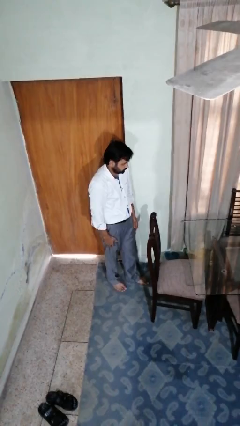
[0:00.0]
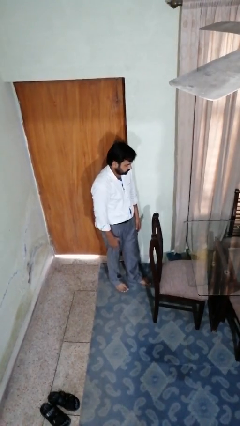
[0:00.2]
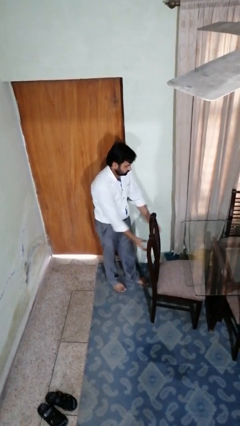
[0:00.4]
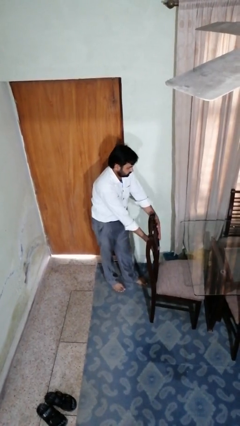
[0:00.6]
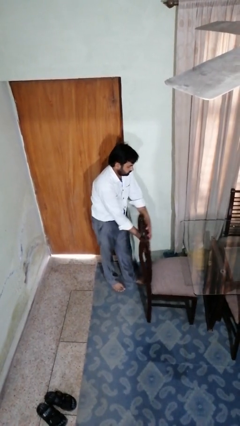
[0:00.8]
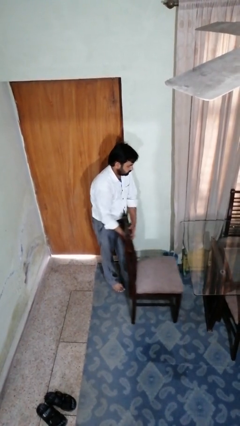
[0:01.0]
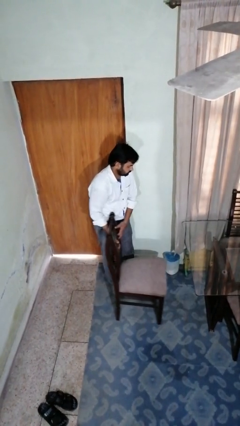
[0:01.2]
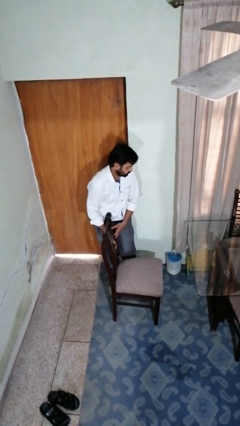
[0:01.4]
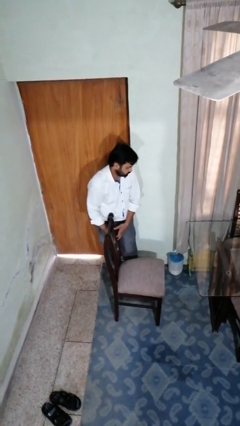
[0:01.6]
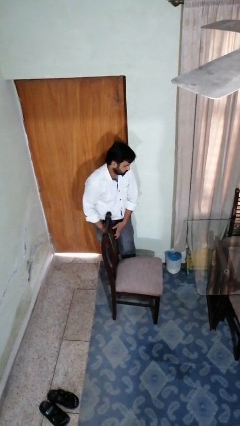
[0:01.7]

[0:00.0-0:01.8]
person pulls out chair

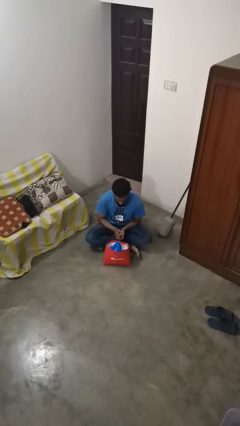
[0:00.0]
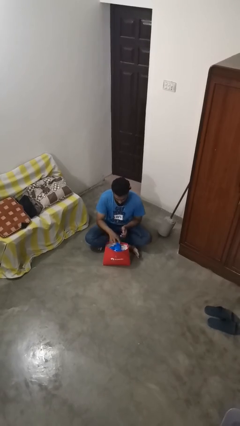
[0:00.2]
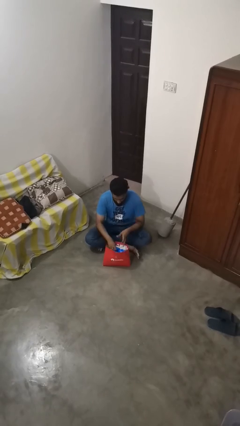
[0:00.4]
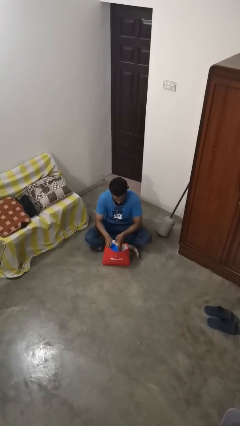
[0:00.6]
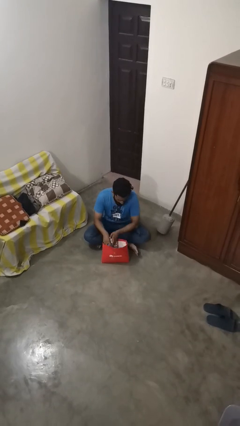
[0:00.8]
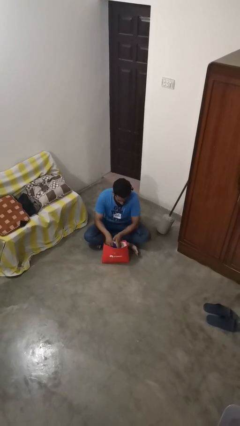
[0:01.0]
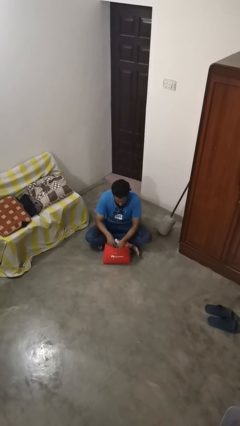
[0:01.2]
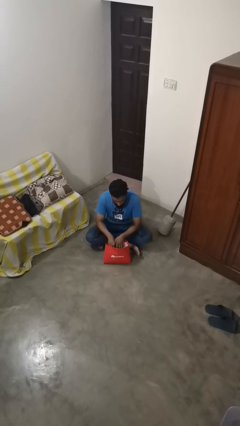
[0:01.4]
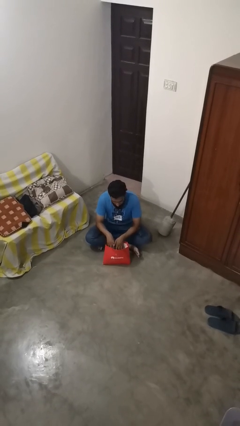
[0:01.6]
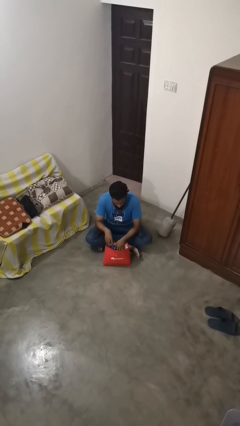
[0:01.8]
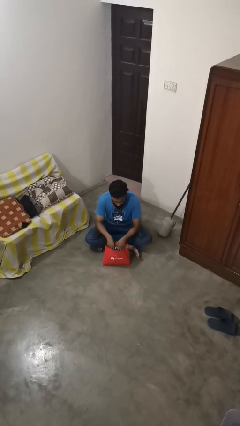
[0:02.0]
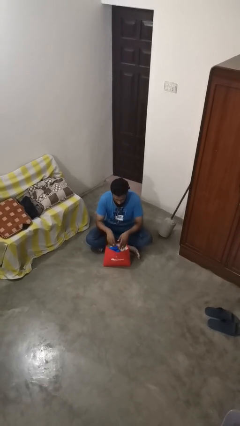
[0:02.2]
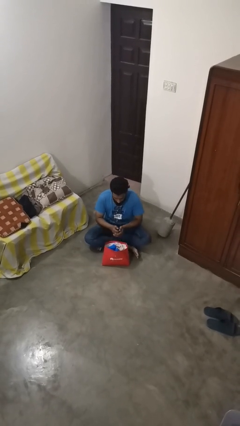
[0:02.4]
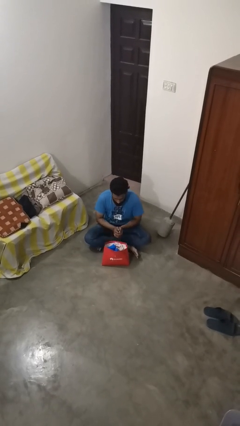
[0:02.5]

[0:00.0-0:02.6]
person searches in bag

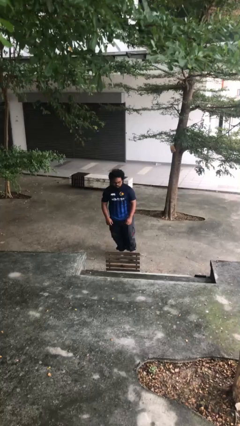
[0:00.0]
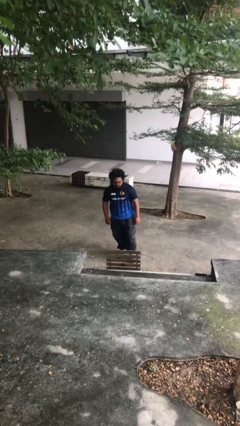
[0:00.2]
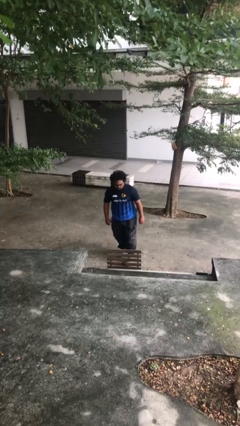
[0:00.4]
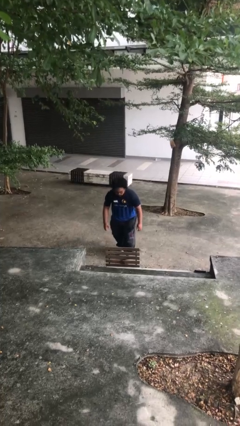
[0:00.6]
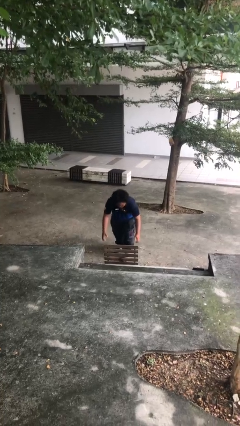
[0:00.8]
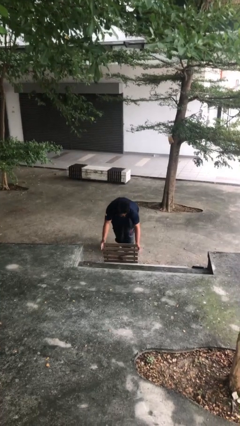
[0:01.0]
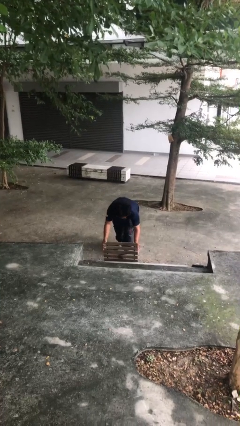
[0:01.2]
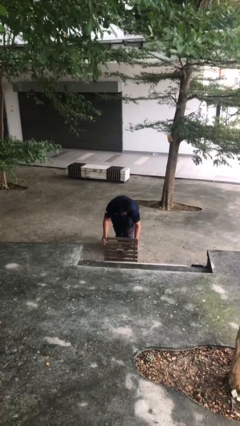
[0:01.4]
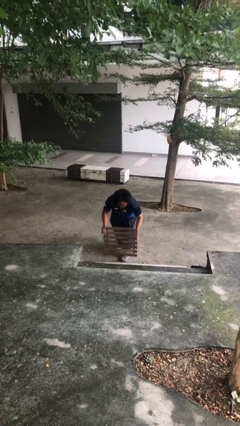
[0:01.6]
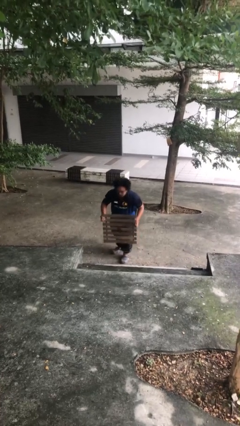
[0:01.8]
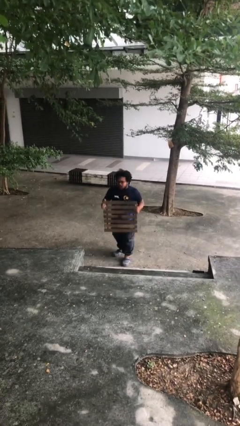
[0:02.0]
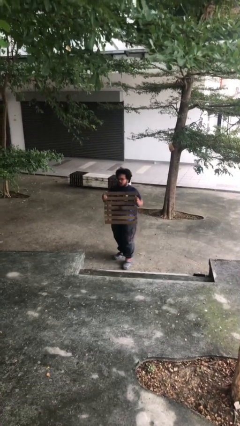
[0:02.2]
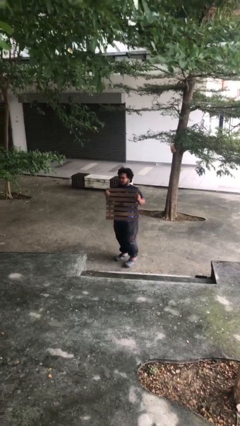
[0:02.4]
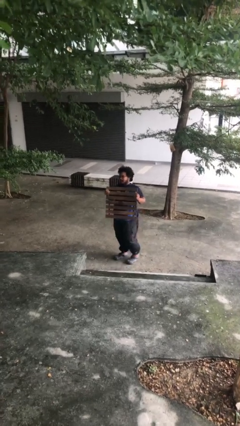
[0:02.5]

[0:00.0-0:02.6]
person picks up object from floor

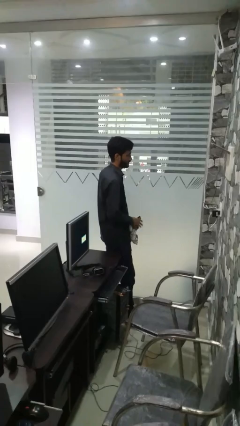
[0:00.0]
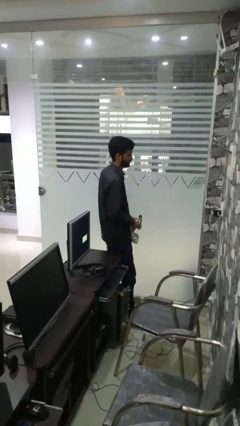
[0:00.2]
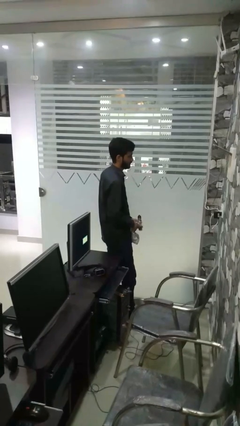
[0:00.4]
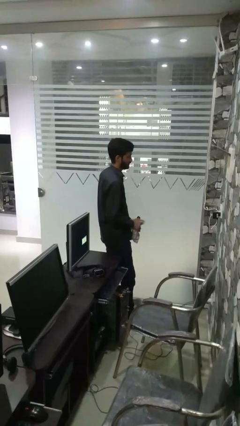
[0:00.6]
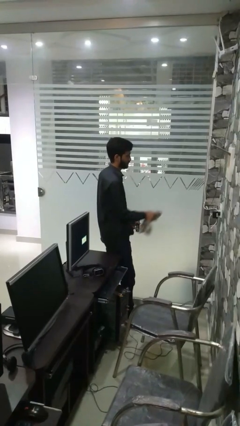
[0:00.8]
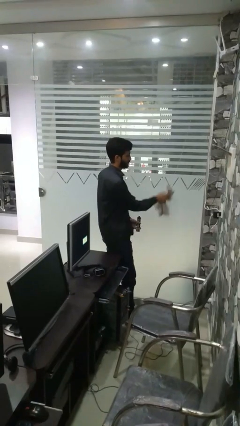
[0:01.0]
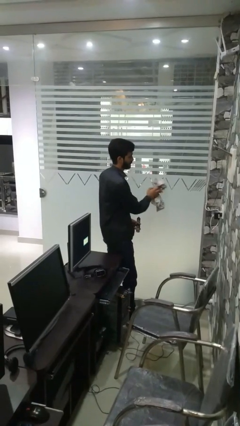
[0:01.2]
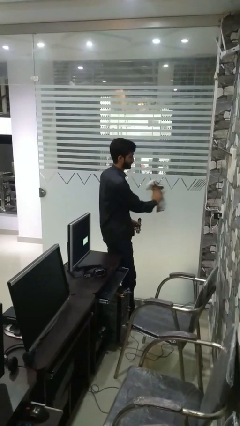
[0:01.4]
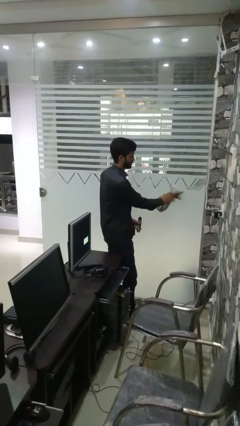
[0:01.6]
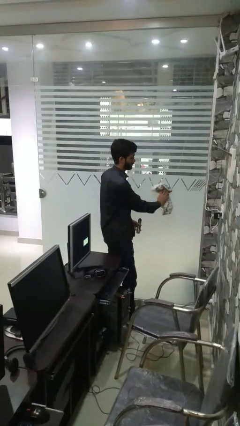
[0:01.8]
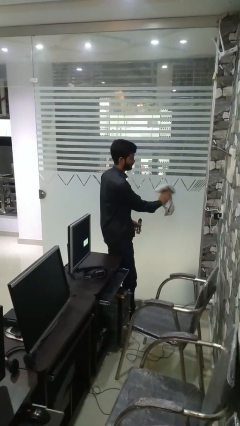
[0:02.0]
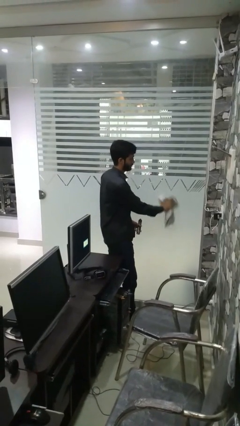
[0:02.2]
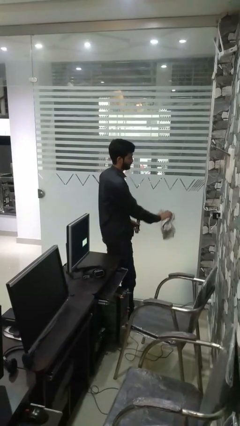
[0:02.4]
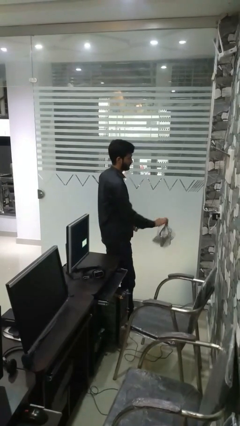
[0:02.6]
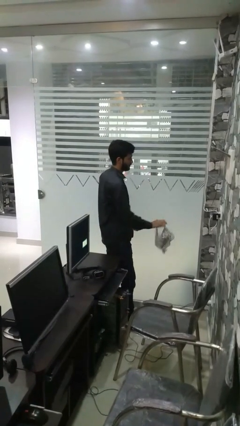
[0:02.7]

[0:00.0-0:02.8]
person washes window

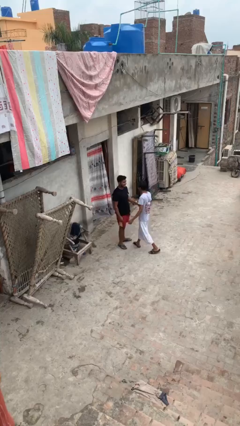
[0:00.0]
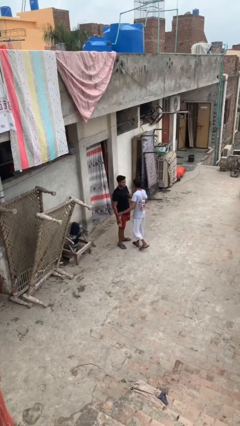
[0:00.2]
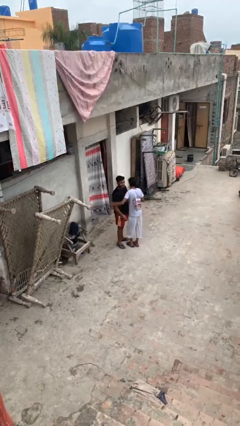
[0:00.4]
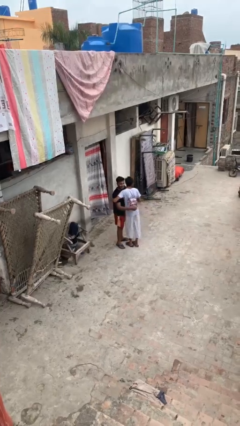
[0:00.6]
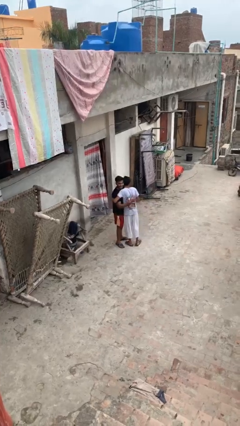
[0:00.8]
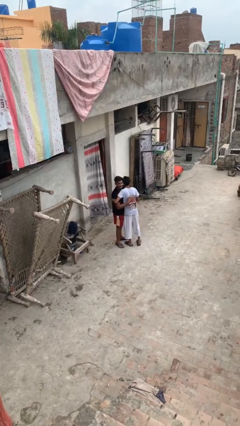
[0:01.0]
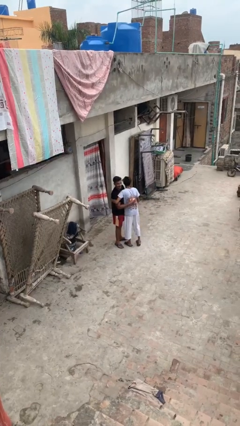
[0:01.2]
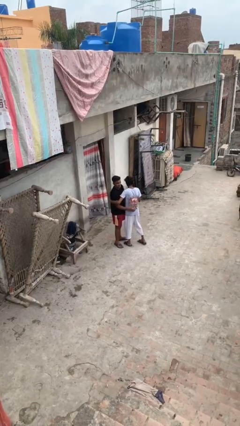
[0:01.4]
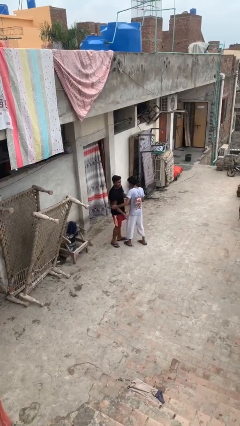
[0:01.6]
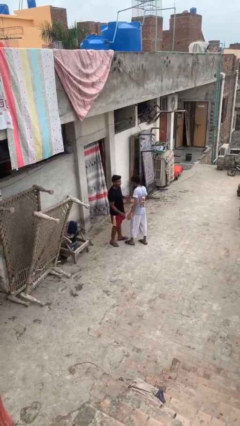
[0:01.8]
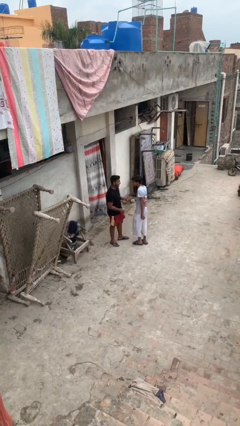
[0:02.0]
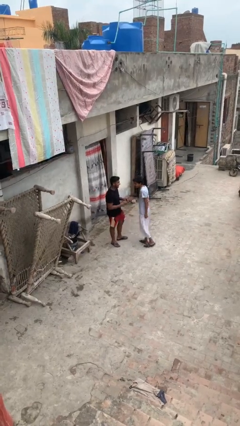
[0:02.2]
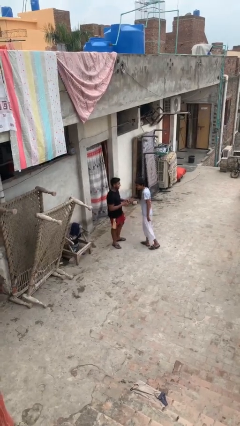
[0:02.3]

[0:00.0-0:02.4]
person embraces person

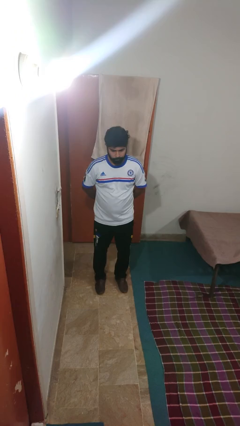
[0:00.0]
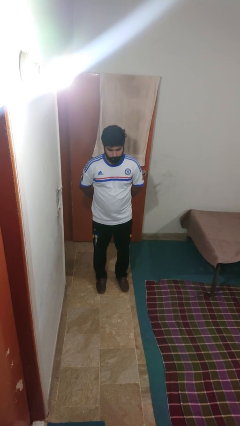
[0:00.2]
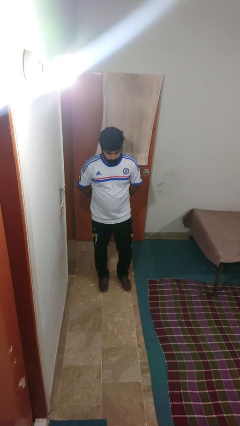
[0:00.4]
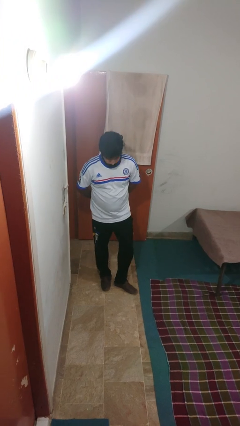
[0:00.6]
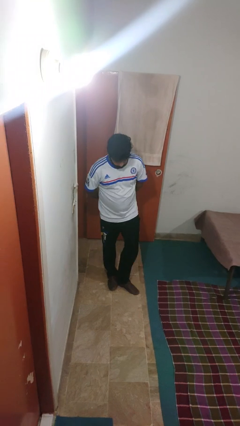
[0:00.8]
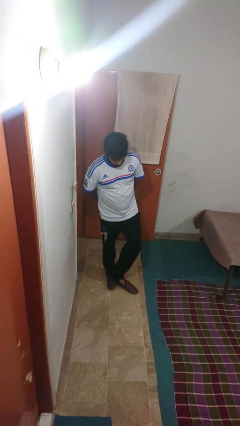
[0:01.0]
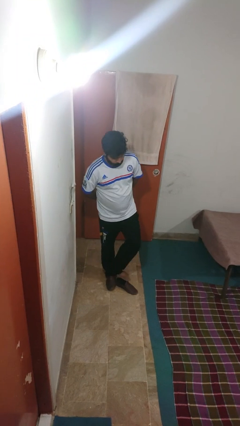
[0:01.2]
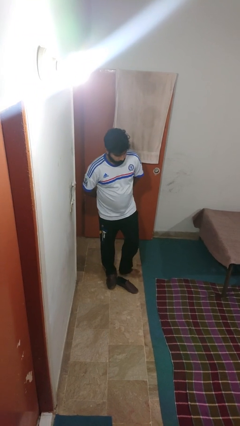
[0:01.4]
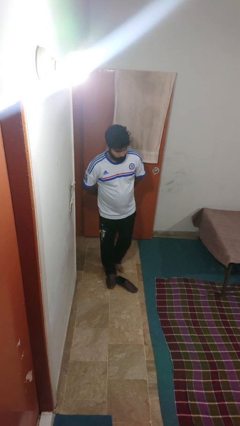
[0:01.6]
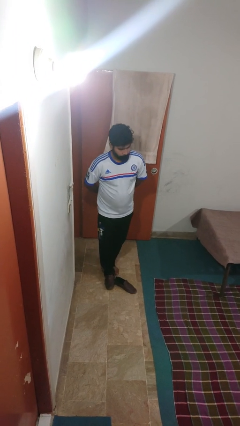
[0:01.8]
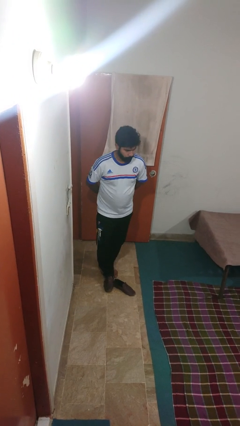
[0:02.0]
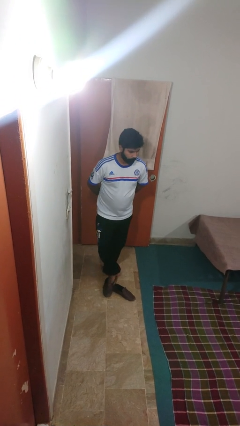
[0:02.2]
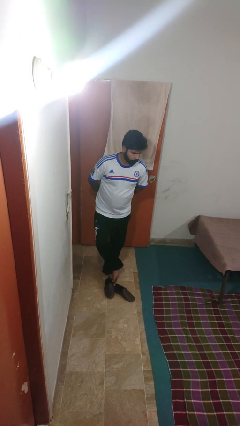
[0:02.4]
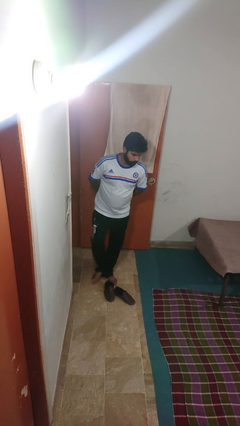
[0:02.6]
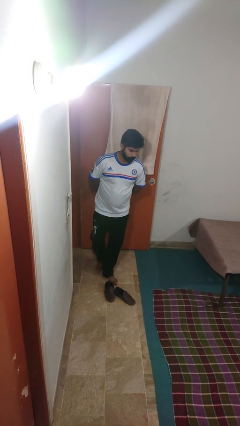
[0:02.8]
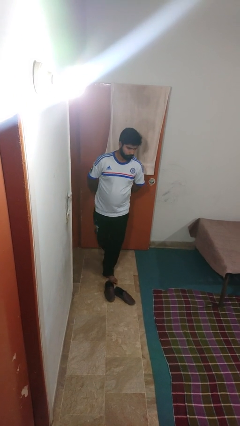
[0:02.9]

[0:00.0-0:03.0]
person takes off shoes

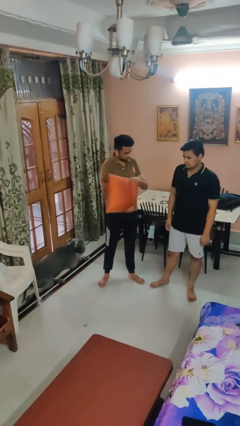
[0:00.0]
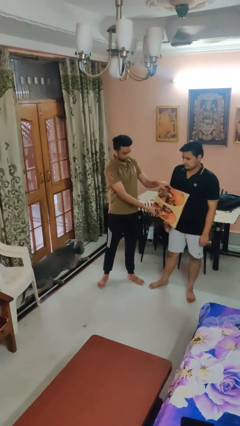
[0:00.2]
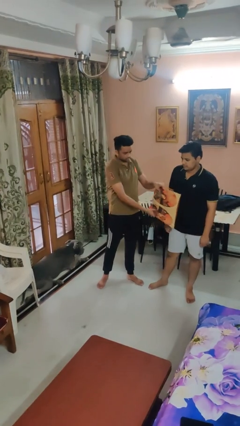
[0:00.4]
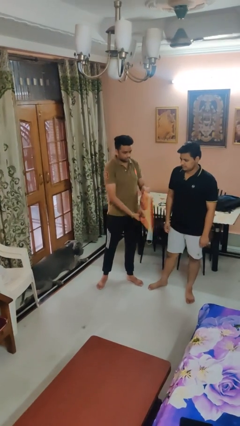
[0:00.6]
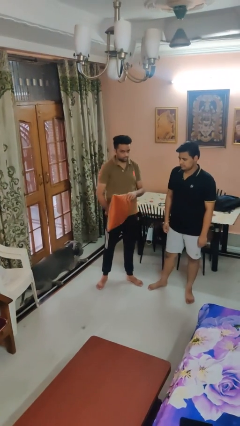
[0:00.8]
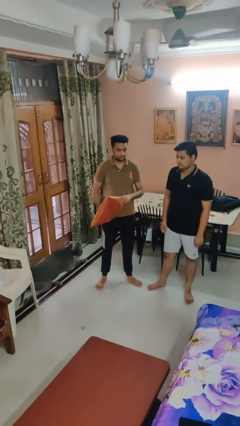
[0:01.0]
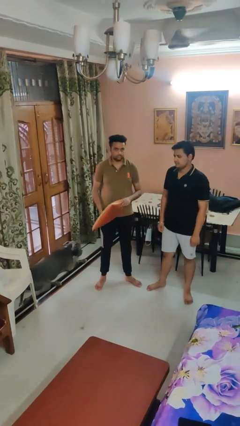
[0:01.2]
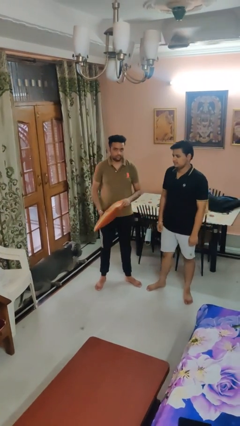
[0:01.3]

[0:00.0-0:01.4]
person hits person with pillow

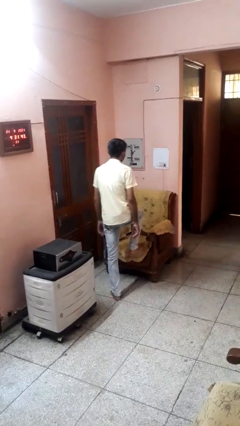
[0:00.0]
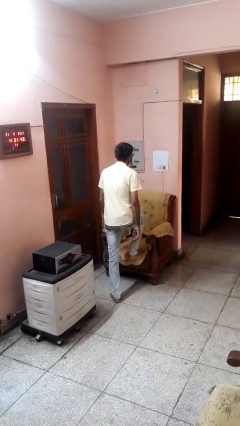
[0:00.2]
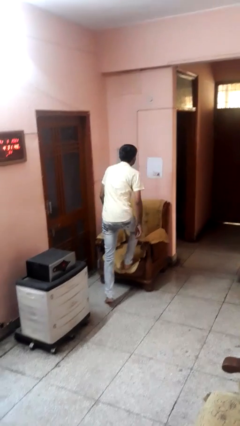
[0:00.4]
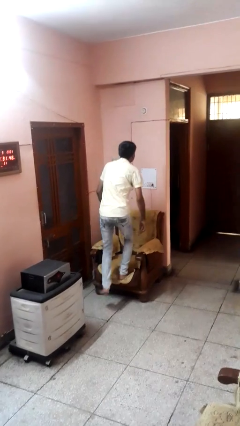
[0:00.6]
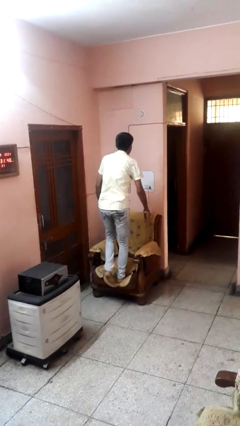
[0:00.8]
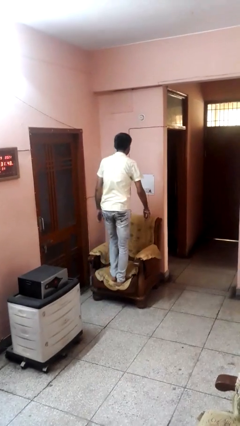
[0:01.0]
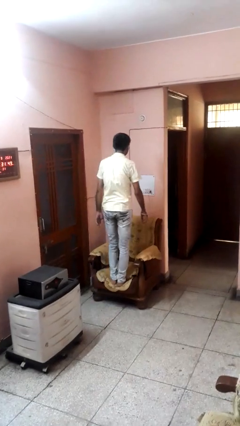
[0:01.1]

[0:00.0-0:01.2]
person climbs on couch
